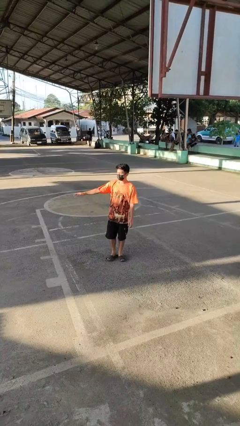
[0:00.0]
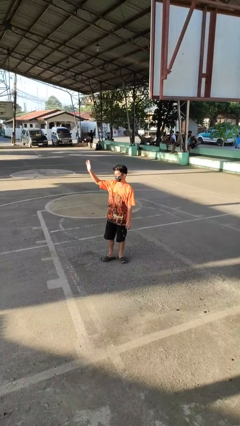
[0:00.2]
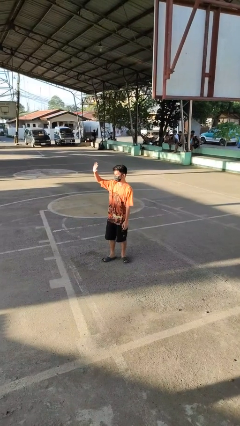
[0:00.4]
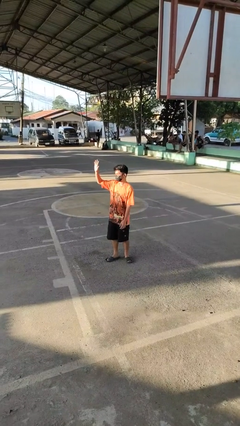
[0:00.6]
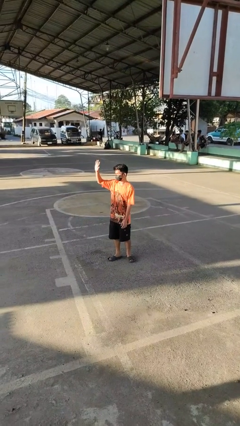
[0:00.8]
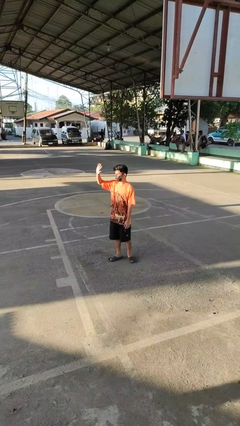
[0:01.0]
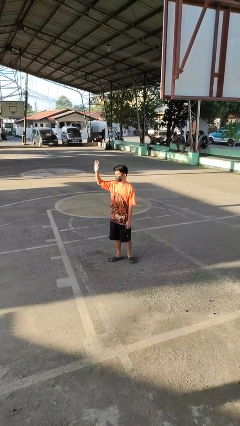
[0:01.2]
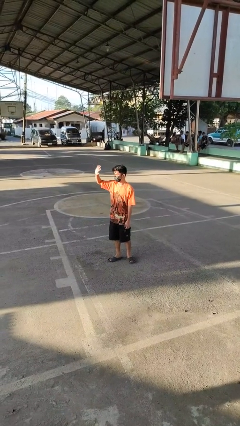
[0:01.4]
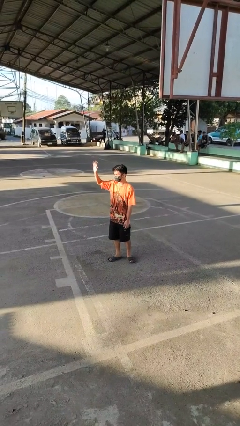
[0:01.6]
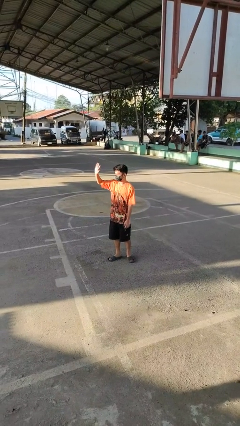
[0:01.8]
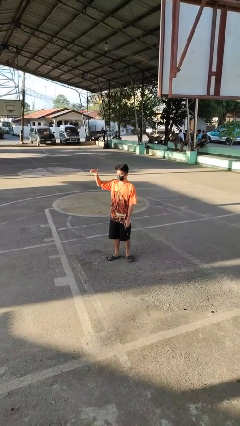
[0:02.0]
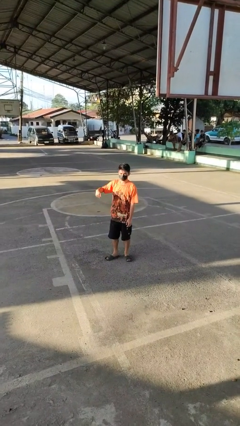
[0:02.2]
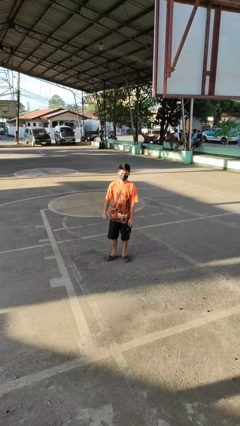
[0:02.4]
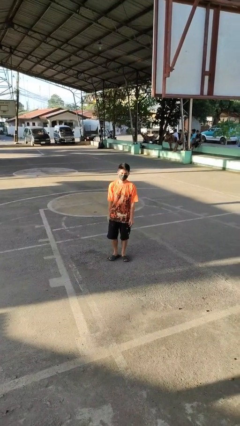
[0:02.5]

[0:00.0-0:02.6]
person waves at person

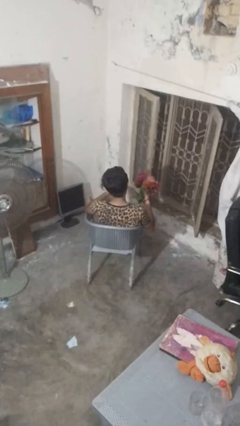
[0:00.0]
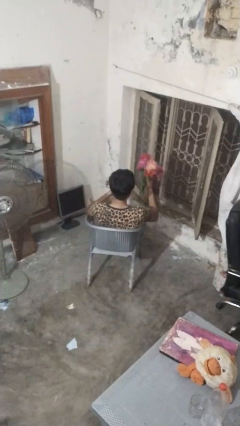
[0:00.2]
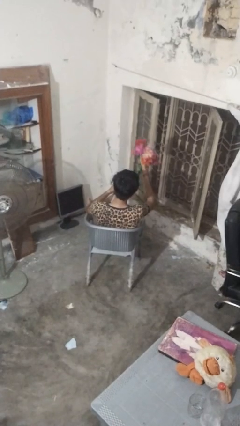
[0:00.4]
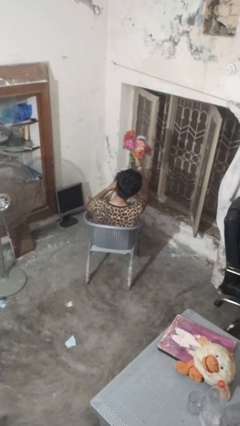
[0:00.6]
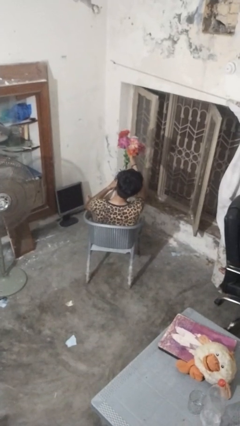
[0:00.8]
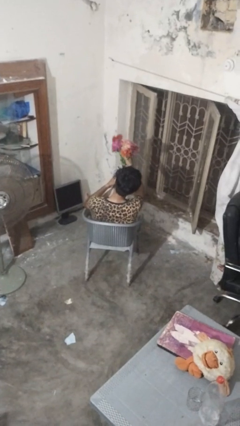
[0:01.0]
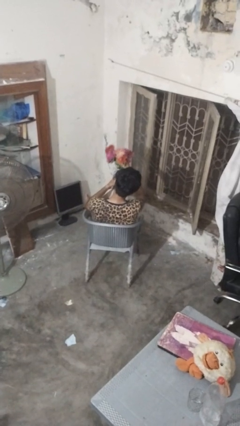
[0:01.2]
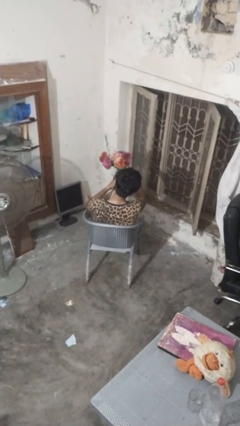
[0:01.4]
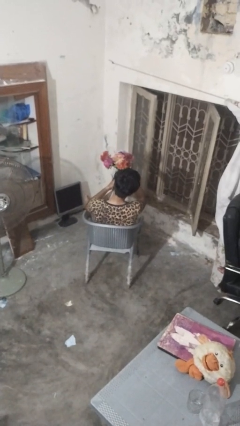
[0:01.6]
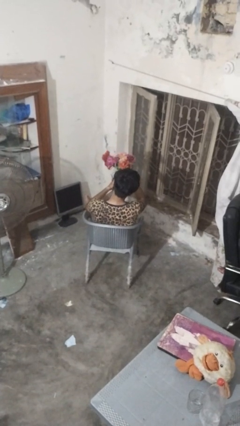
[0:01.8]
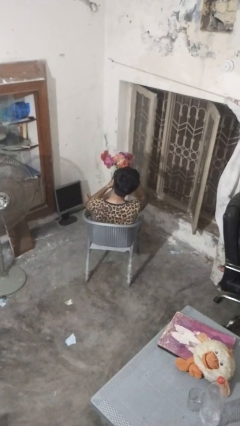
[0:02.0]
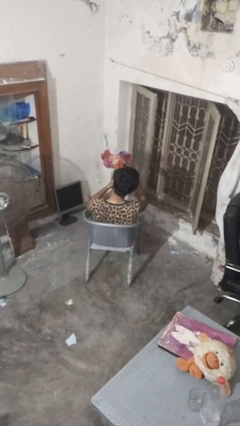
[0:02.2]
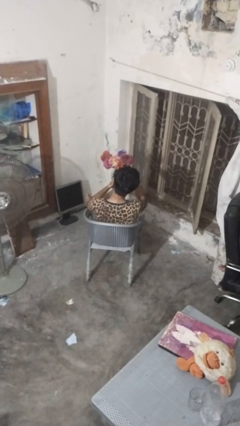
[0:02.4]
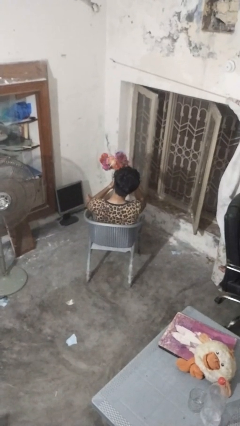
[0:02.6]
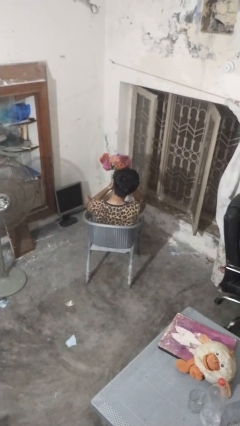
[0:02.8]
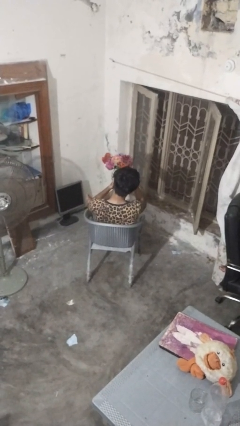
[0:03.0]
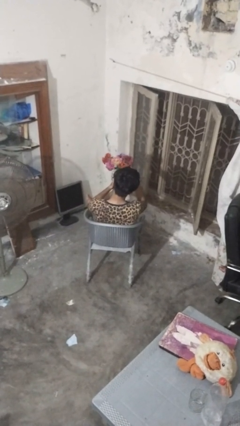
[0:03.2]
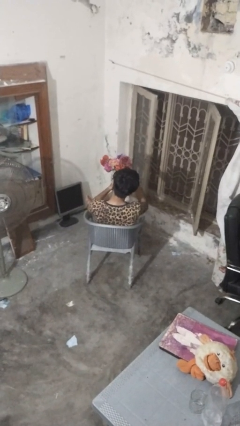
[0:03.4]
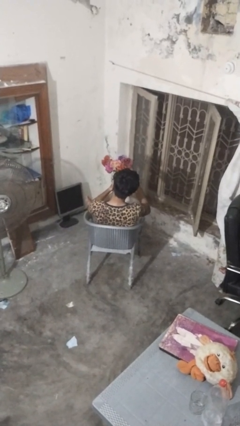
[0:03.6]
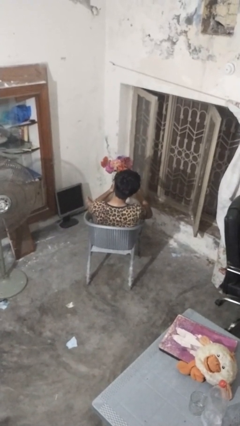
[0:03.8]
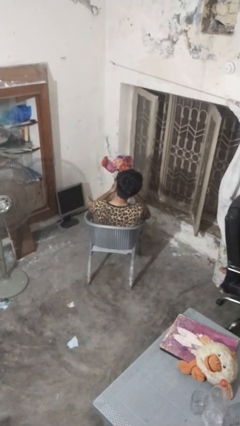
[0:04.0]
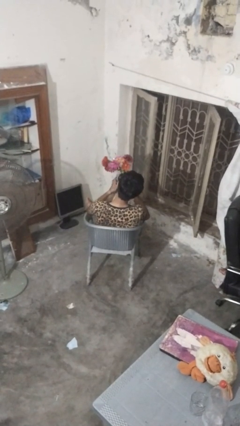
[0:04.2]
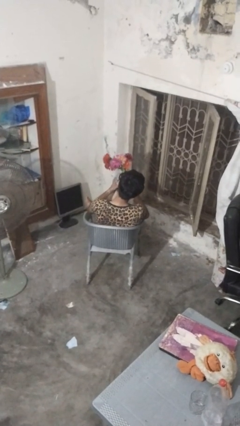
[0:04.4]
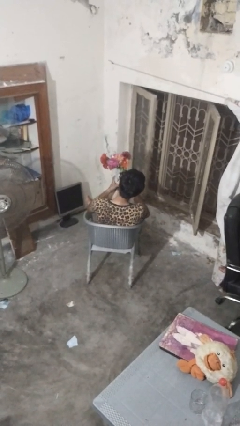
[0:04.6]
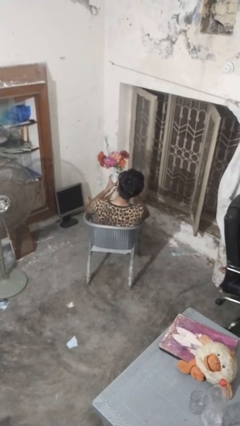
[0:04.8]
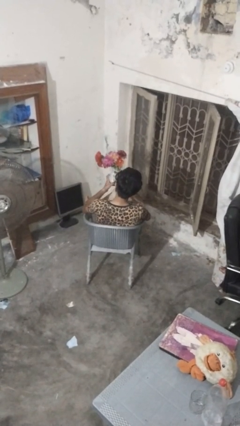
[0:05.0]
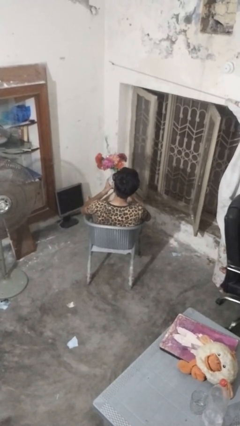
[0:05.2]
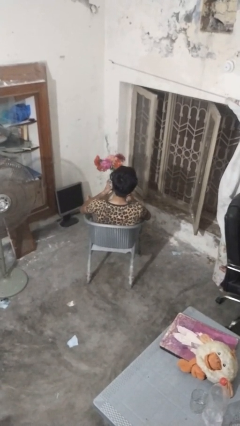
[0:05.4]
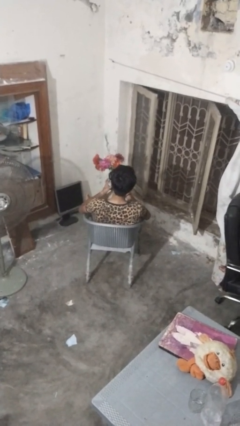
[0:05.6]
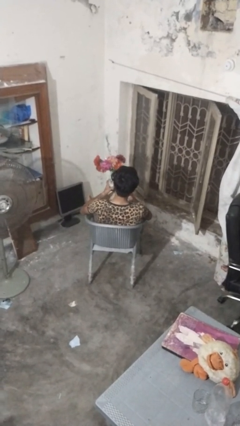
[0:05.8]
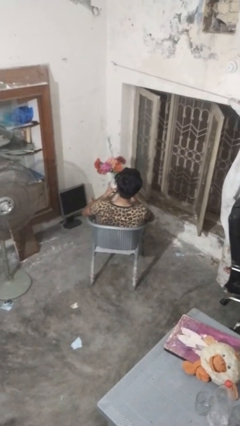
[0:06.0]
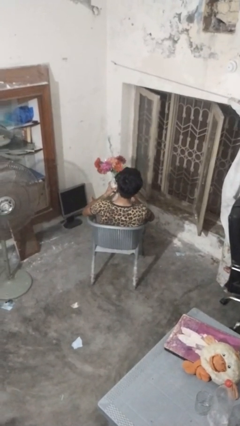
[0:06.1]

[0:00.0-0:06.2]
person arranges flowers in vase

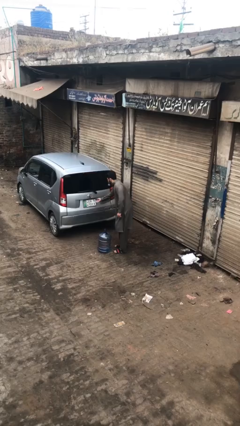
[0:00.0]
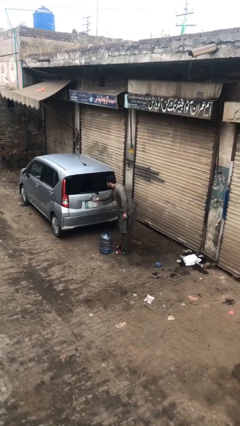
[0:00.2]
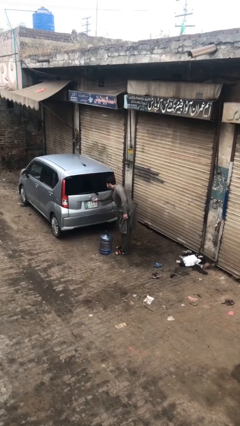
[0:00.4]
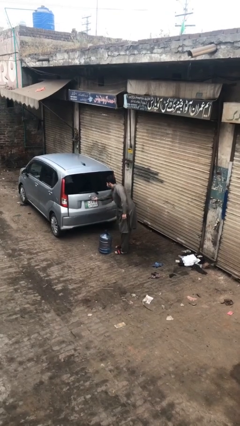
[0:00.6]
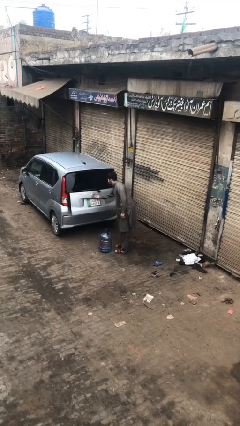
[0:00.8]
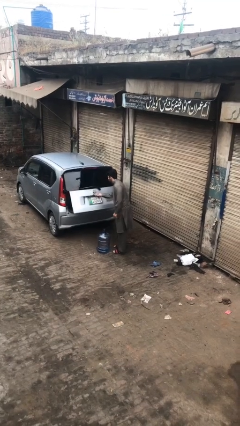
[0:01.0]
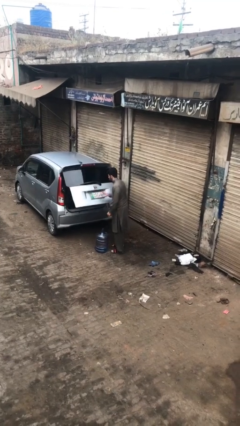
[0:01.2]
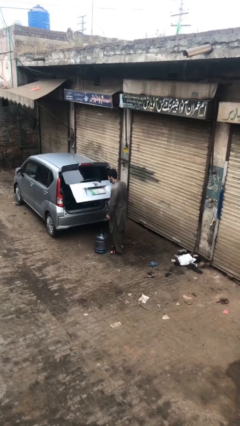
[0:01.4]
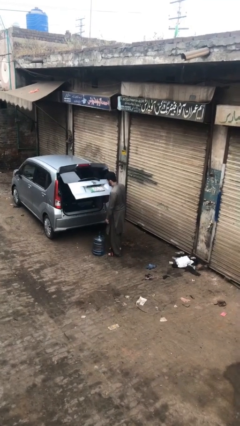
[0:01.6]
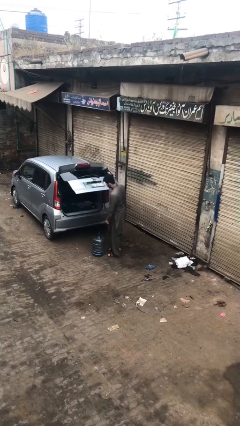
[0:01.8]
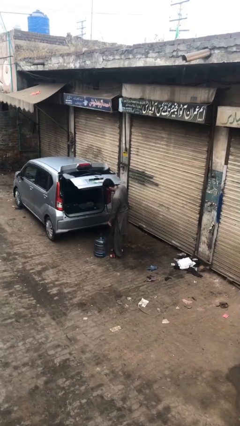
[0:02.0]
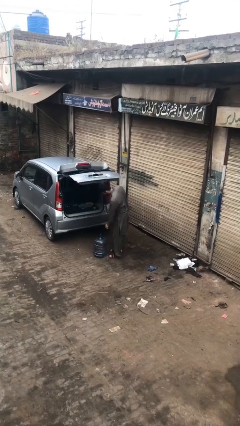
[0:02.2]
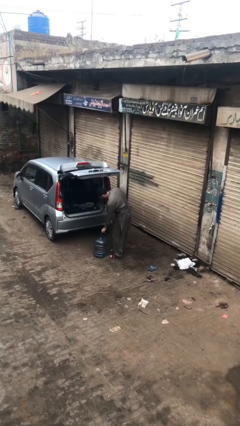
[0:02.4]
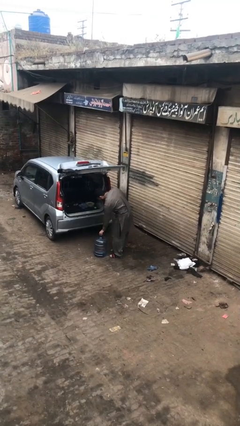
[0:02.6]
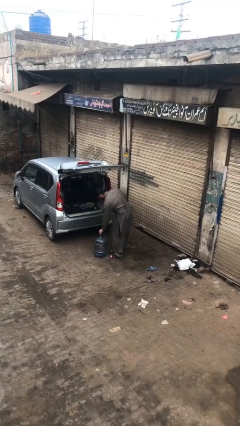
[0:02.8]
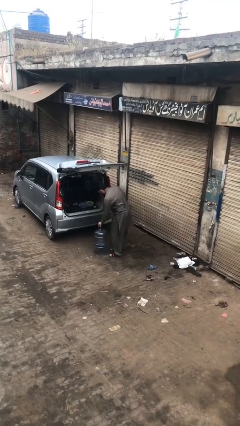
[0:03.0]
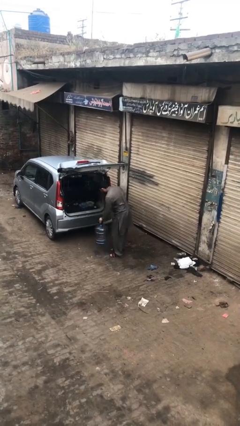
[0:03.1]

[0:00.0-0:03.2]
person opens car trunk

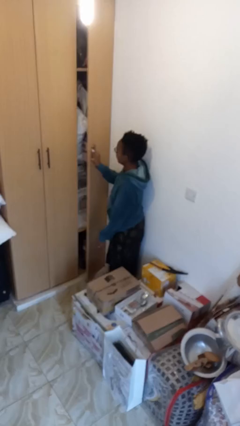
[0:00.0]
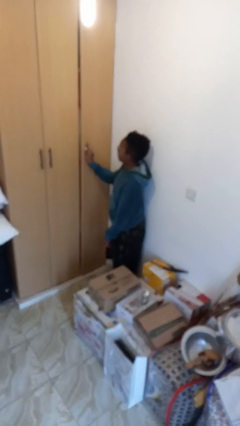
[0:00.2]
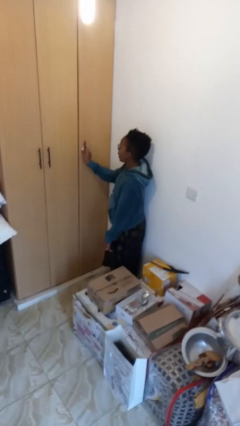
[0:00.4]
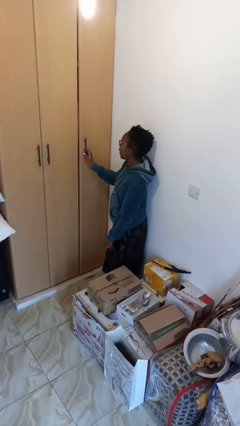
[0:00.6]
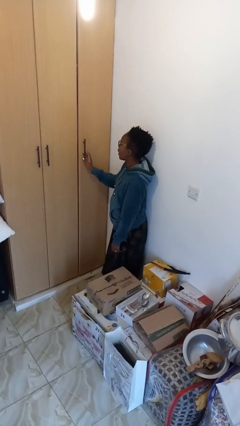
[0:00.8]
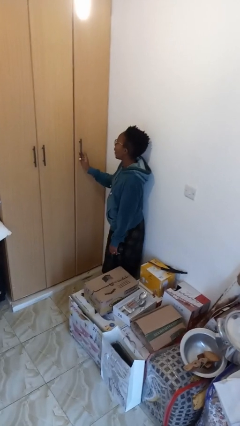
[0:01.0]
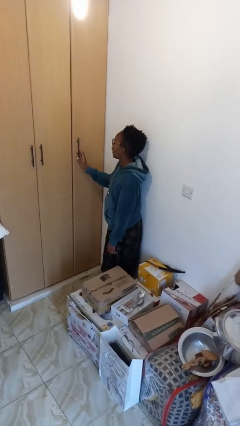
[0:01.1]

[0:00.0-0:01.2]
person closes closet door

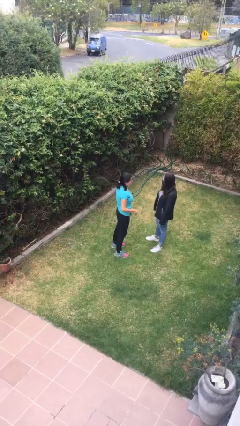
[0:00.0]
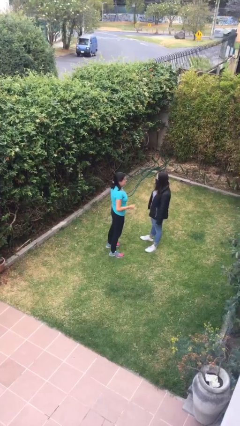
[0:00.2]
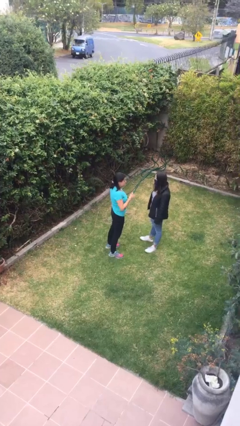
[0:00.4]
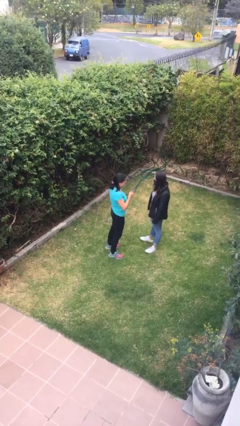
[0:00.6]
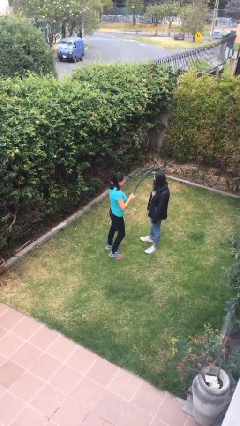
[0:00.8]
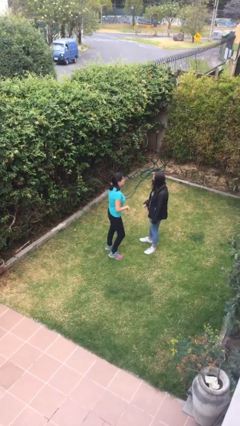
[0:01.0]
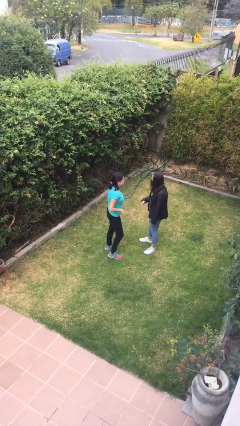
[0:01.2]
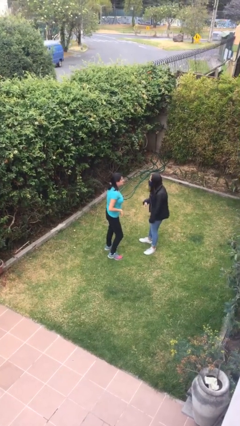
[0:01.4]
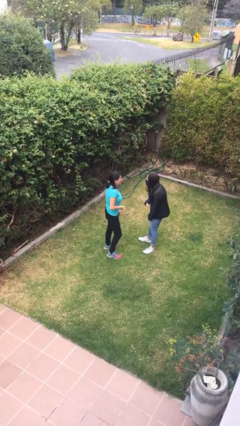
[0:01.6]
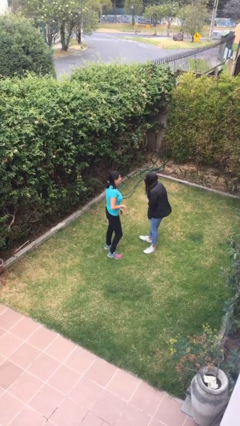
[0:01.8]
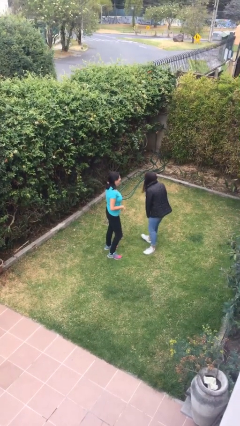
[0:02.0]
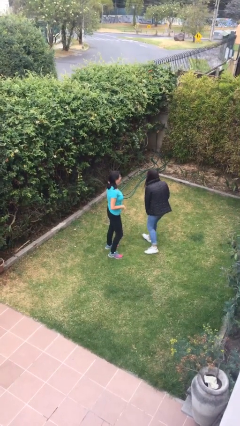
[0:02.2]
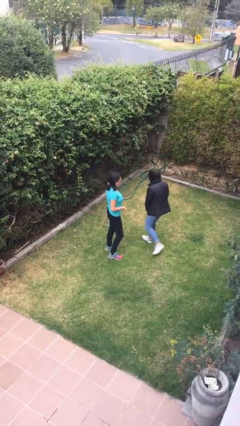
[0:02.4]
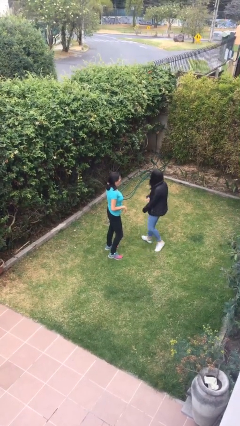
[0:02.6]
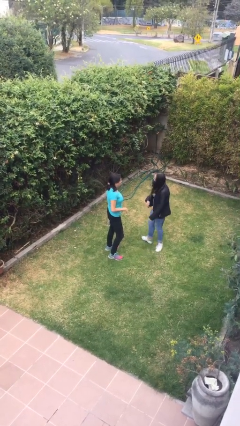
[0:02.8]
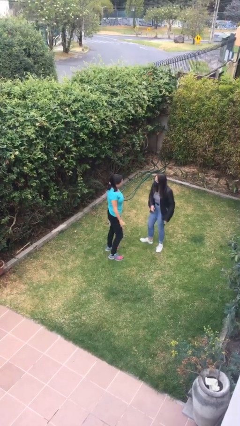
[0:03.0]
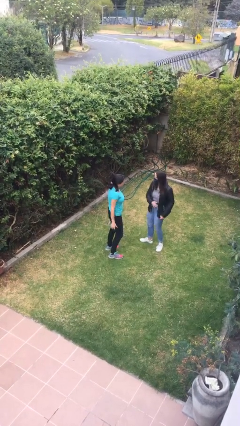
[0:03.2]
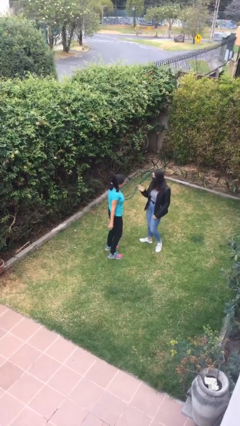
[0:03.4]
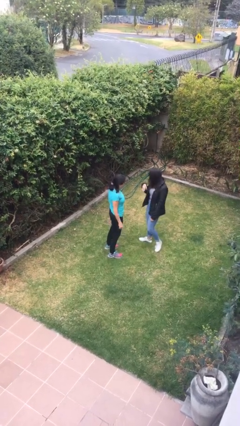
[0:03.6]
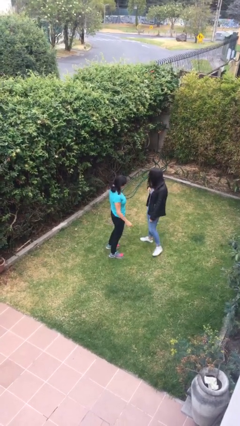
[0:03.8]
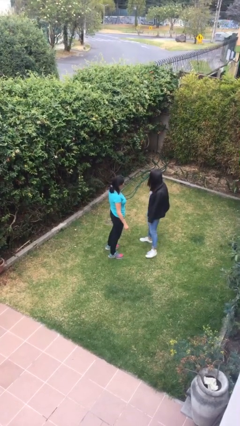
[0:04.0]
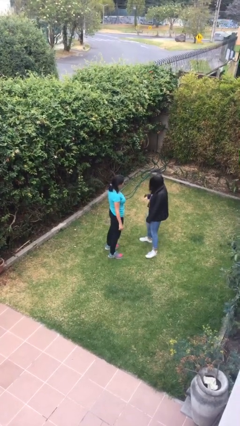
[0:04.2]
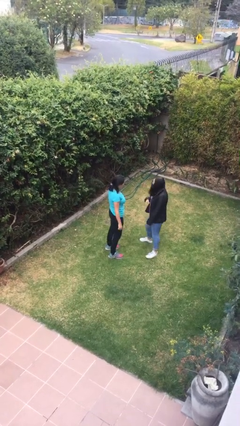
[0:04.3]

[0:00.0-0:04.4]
person talks to person

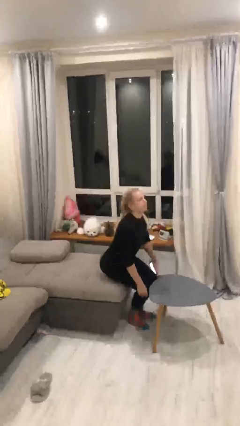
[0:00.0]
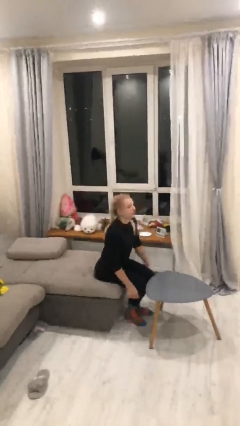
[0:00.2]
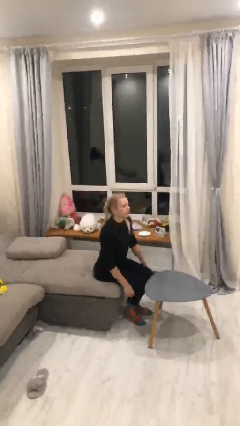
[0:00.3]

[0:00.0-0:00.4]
person sits down
